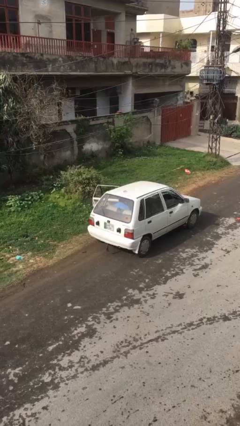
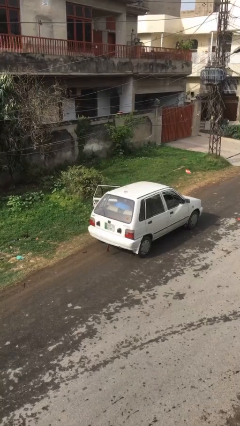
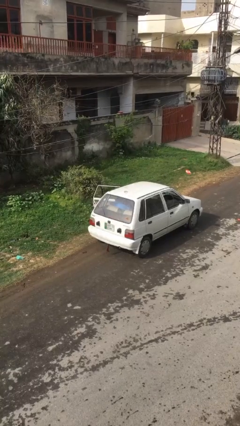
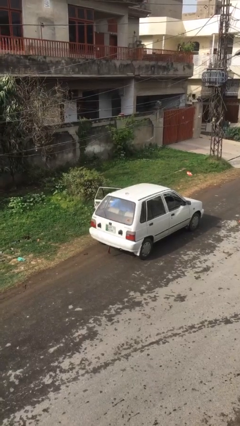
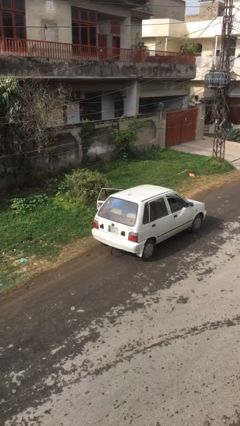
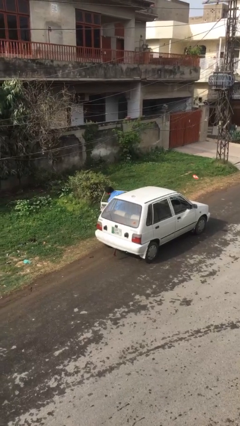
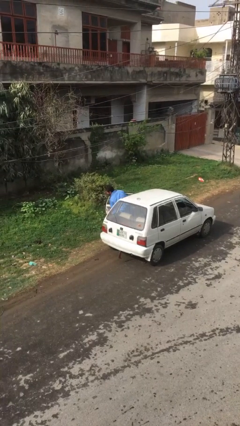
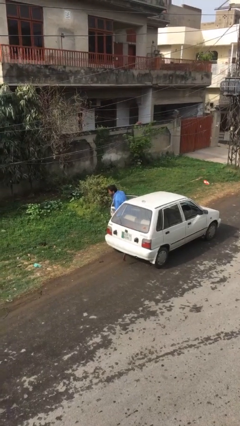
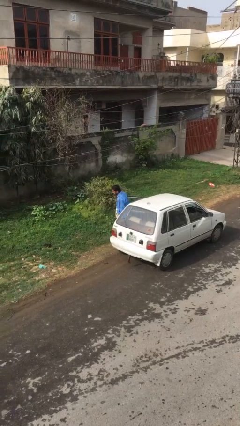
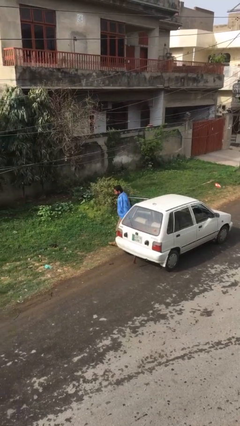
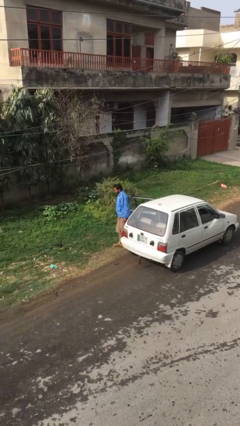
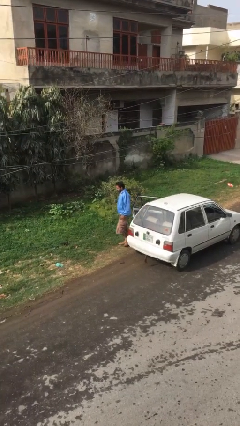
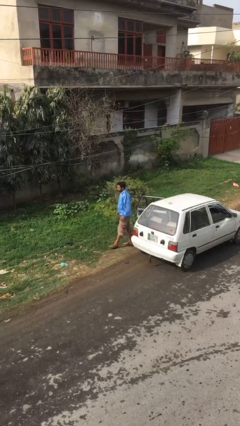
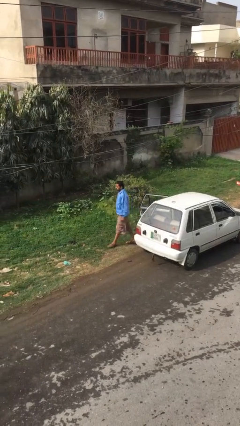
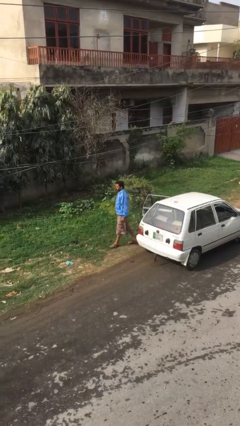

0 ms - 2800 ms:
person exits car

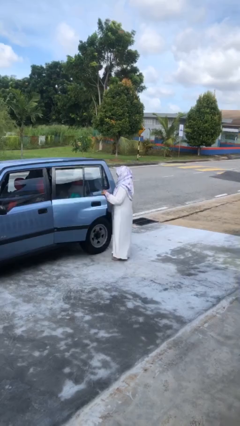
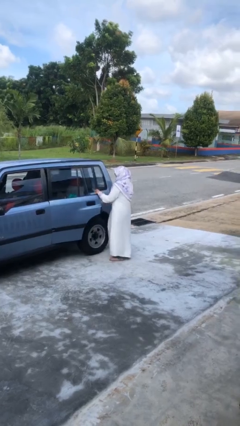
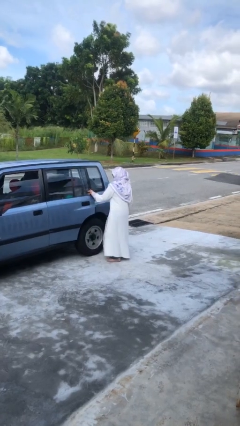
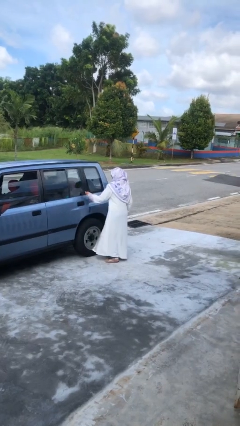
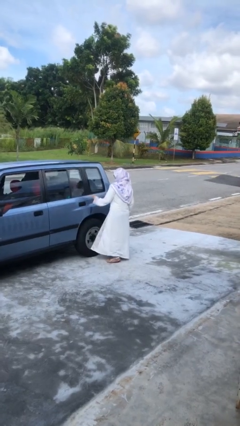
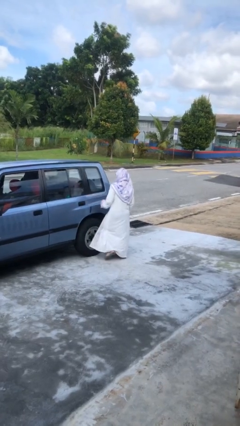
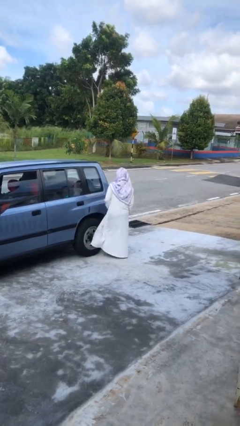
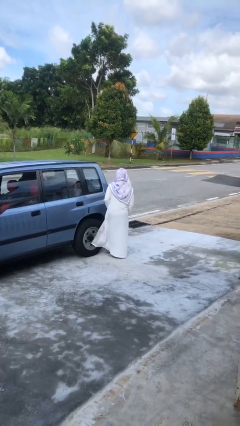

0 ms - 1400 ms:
person closes car door

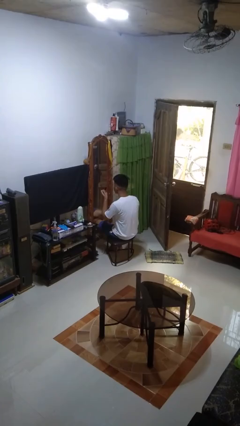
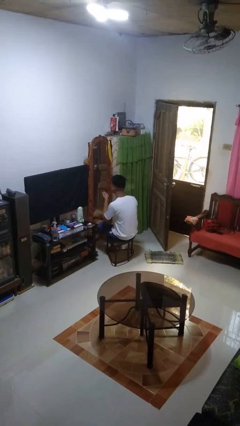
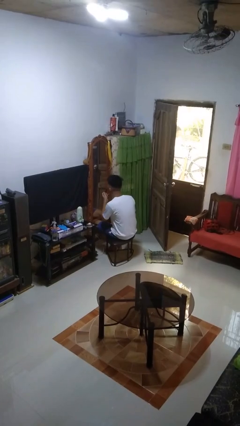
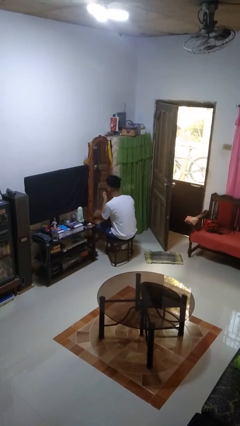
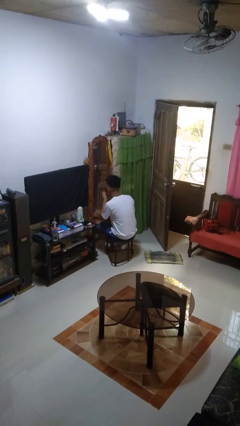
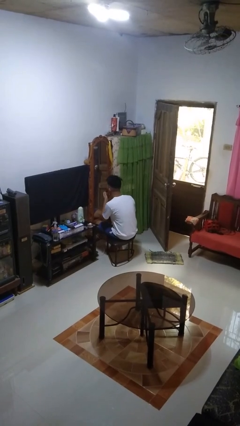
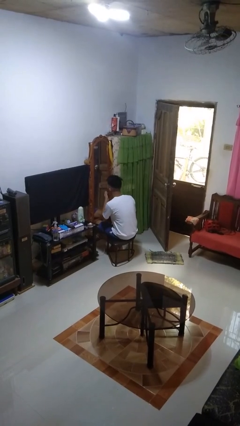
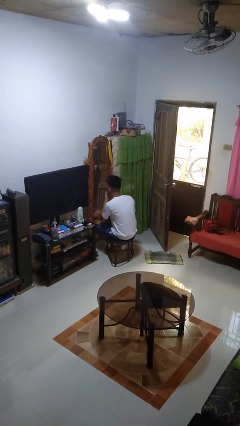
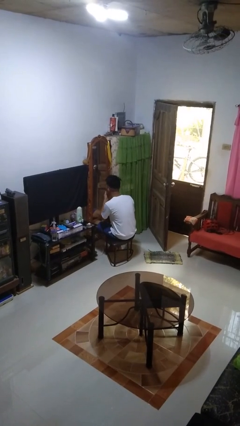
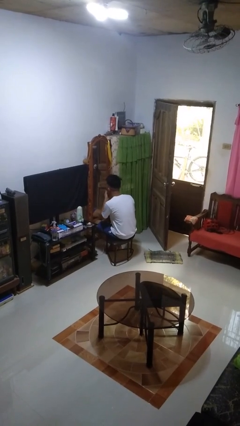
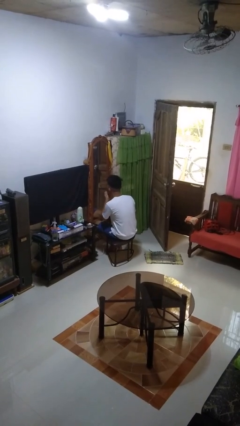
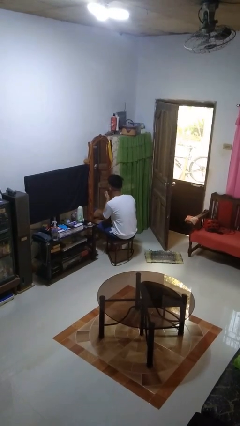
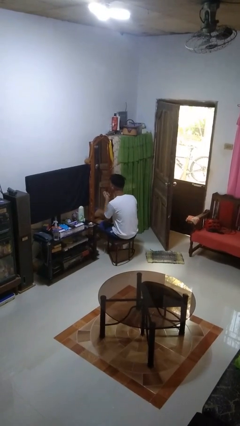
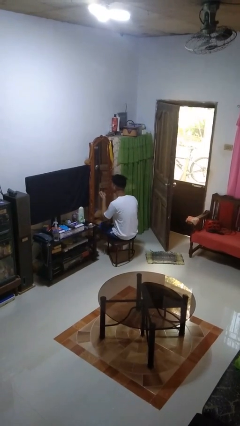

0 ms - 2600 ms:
person applies lip makeup

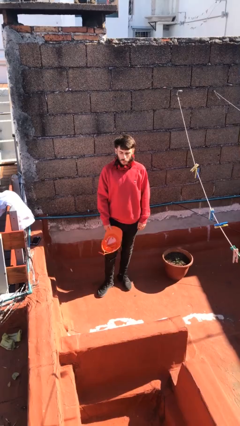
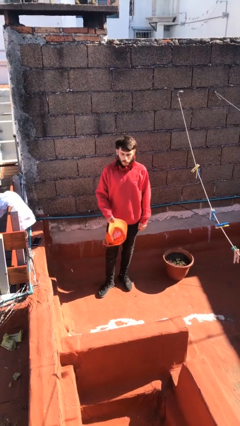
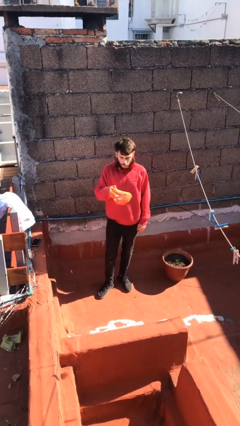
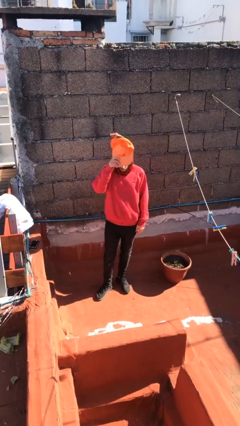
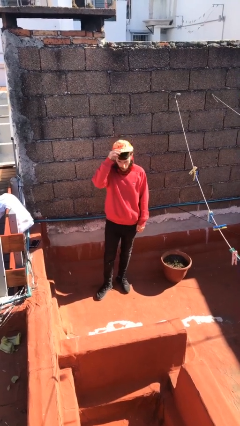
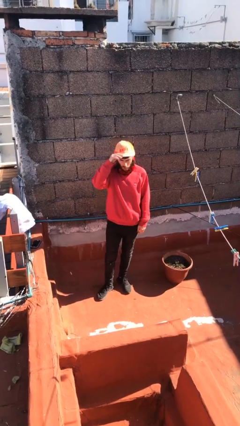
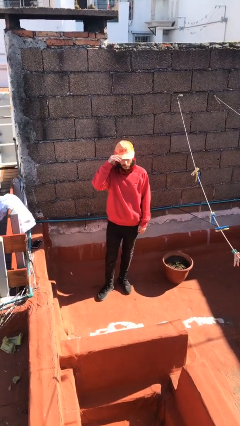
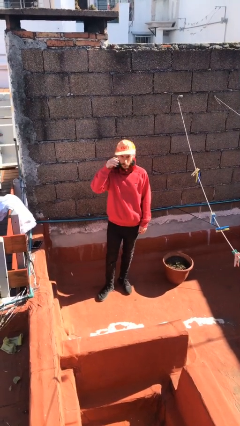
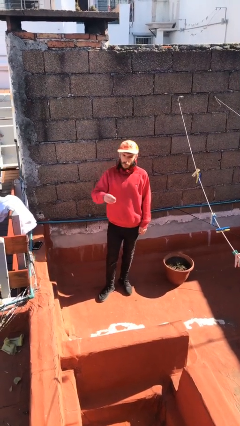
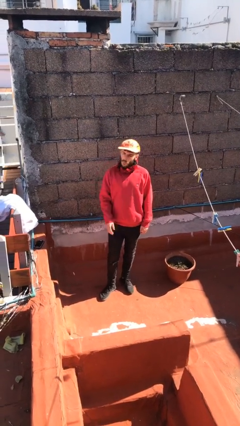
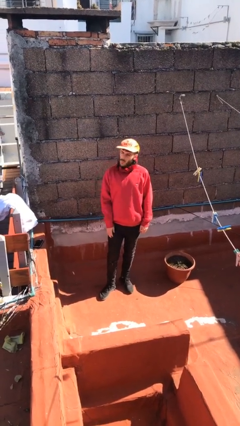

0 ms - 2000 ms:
person puts on hat

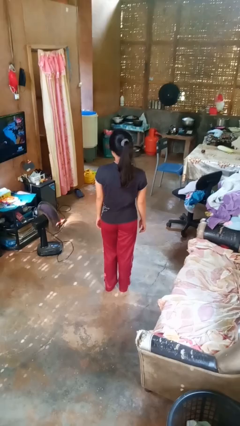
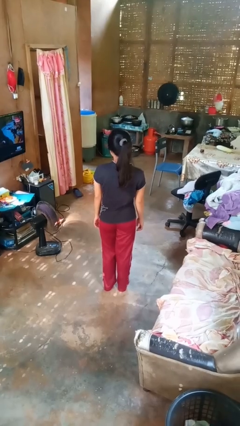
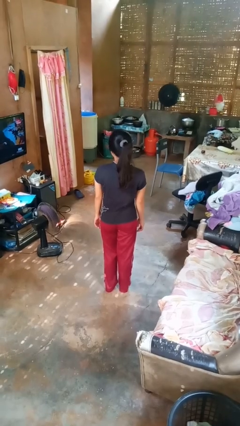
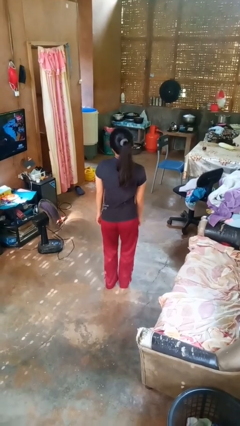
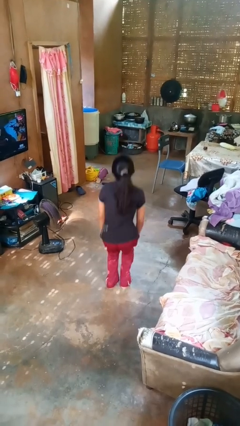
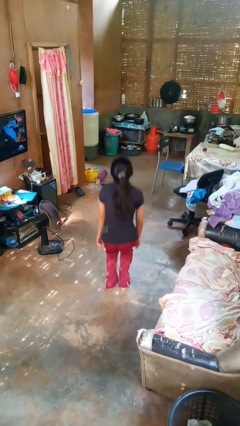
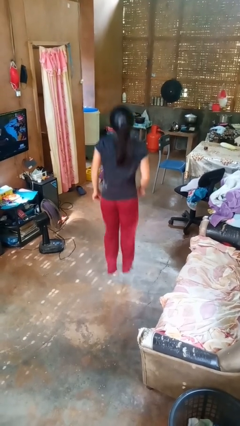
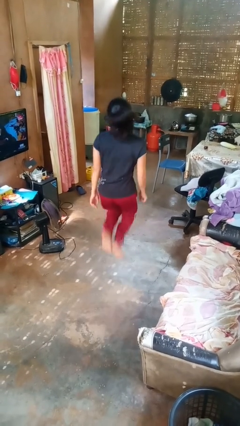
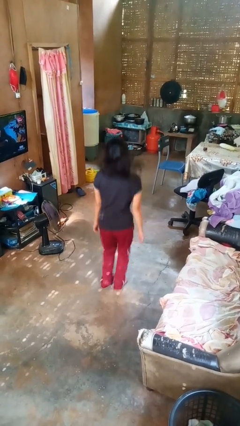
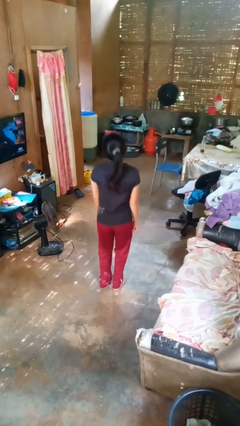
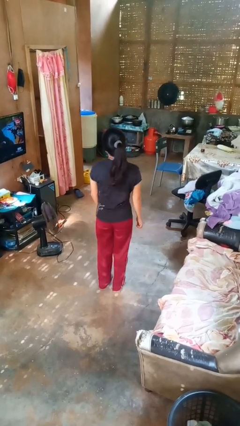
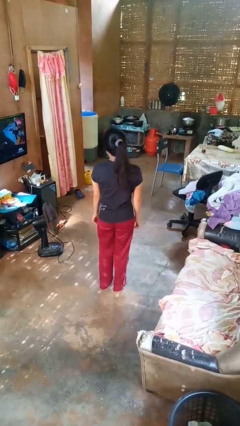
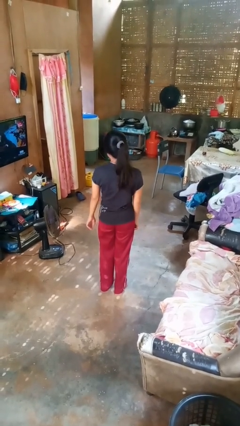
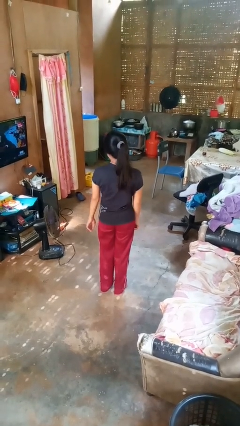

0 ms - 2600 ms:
person jumps

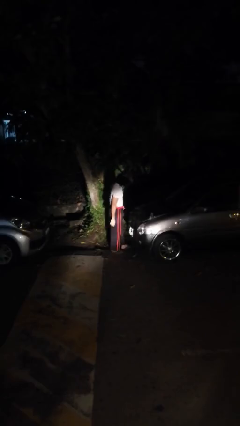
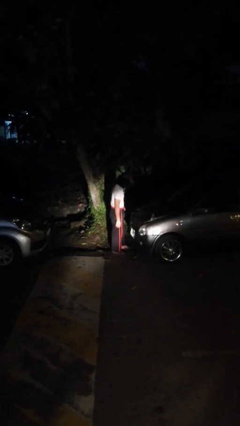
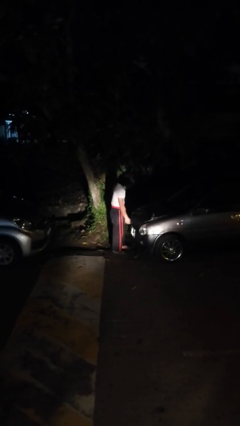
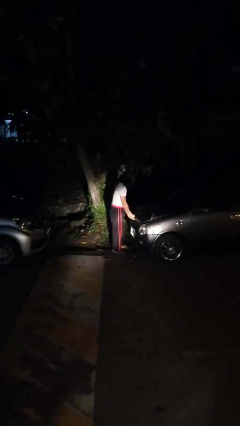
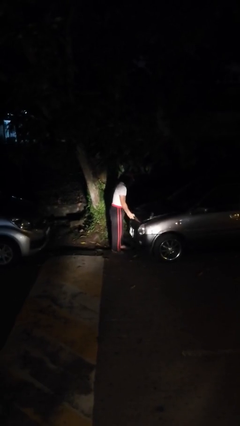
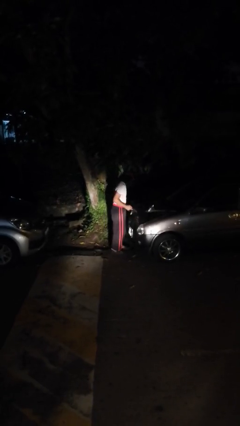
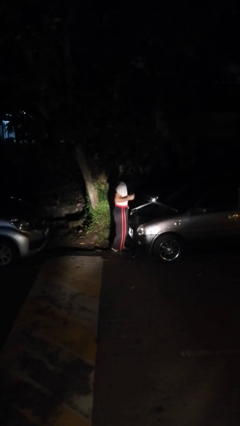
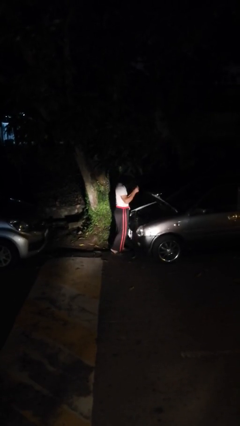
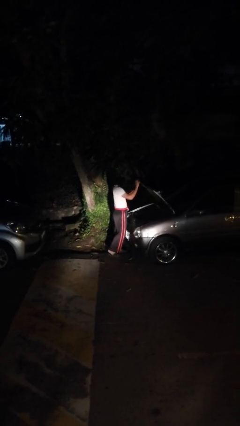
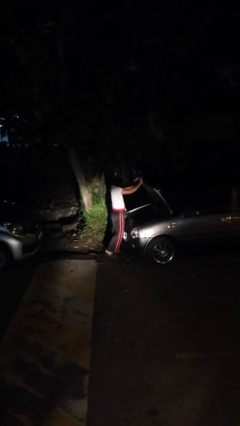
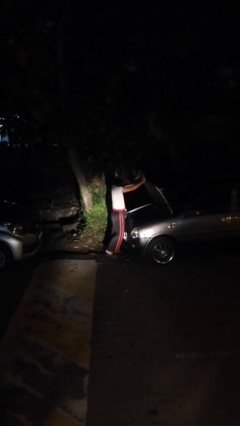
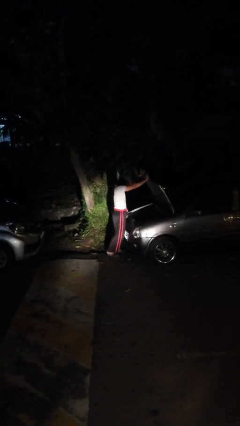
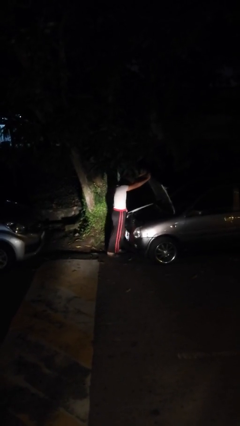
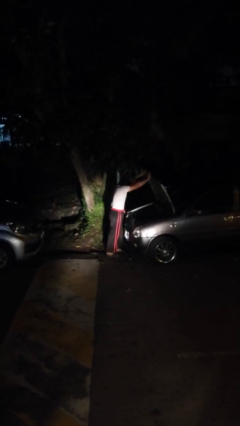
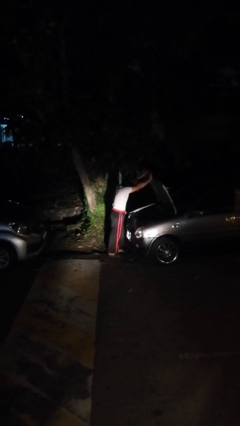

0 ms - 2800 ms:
person opens car hood

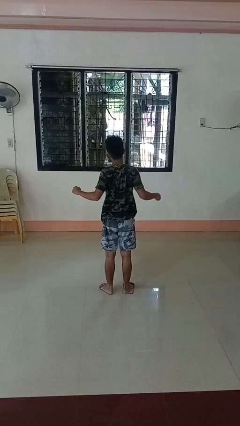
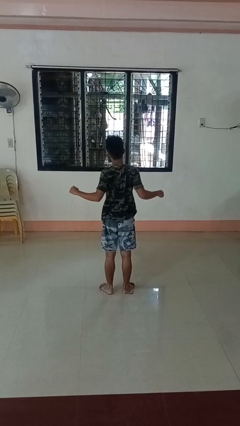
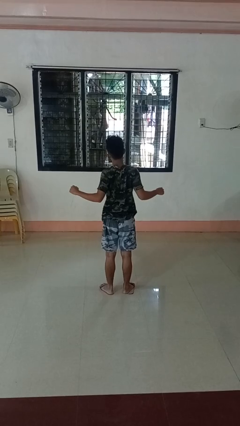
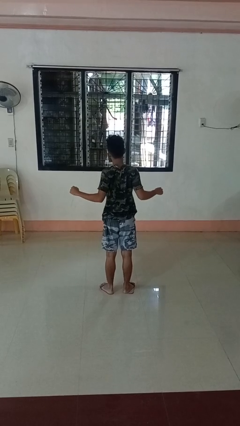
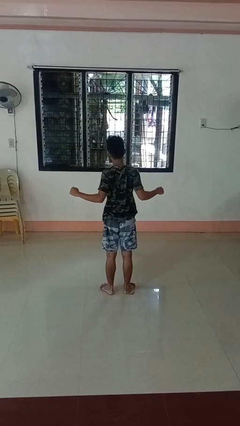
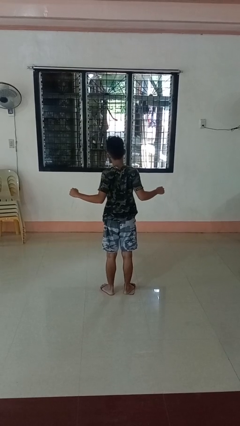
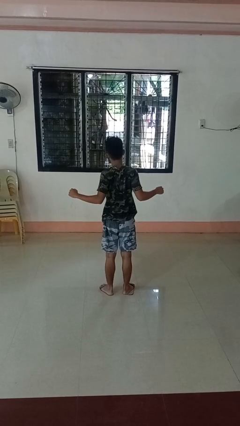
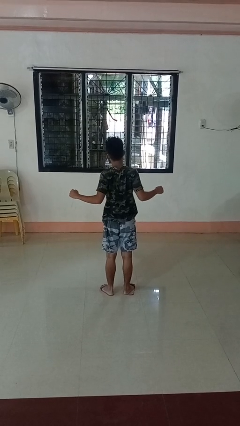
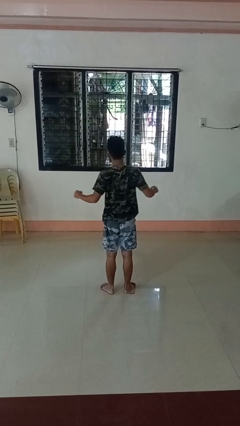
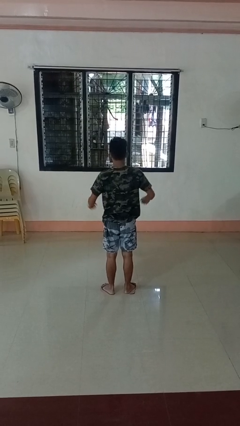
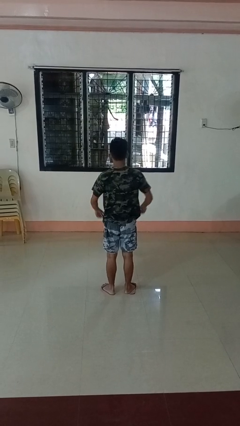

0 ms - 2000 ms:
person stretches back

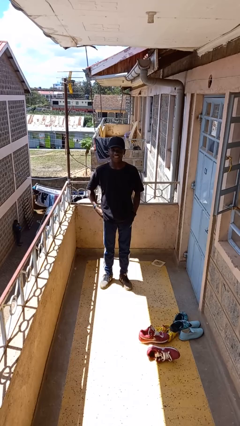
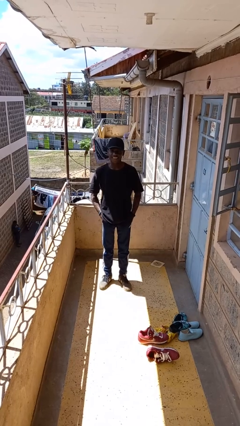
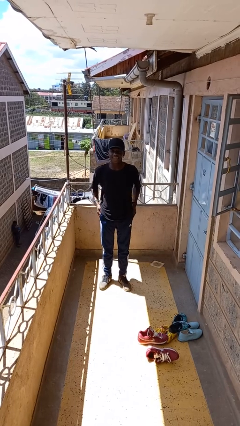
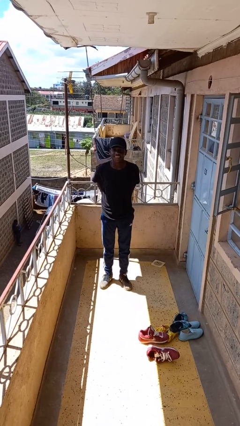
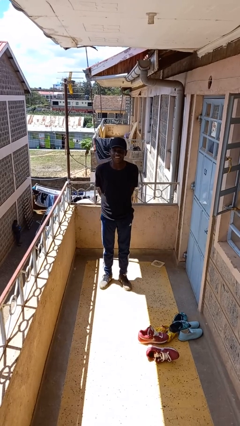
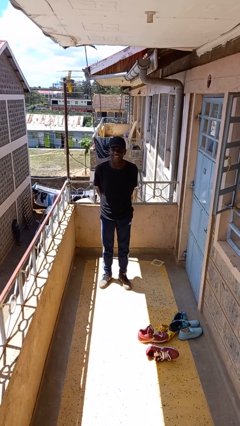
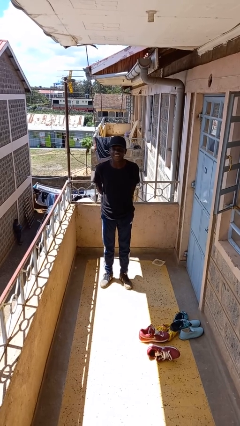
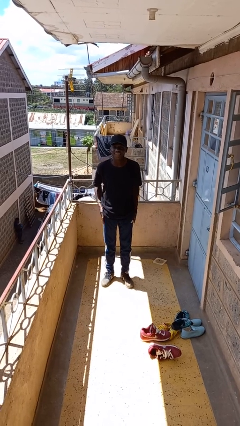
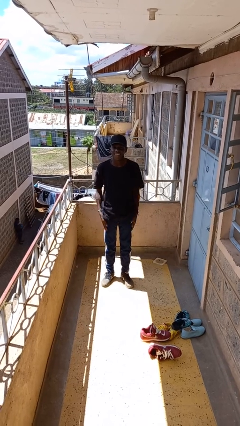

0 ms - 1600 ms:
person puts hands in back pockets
